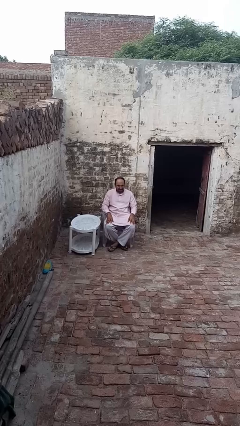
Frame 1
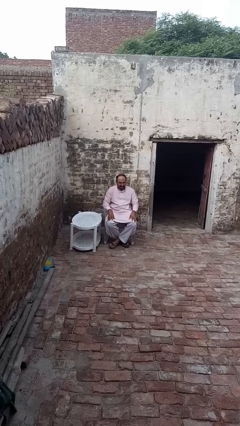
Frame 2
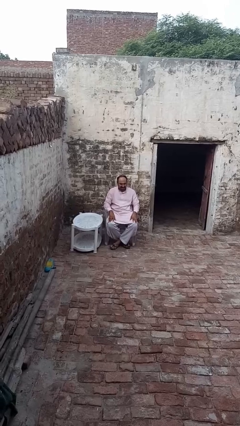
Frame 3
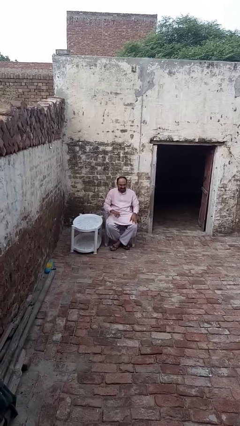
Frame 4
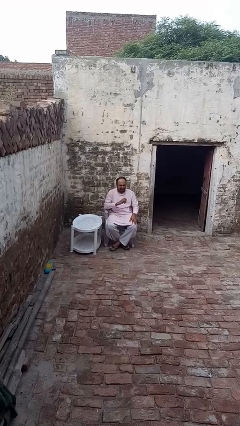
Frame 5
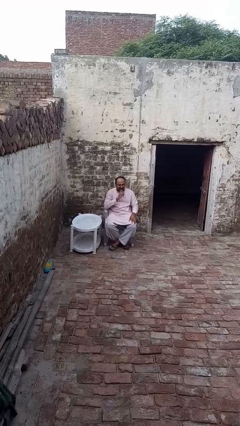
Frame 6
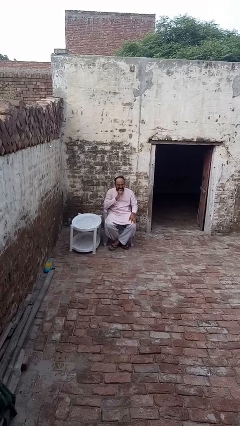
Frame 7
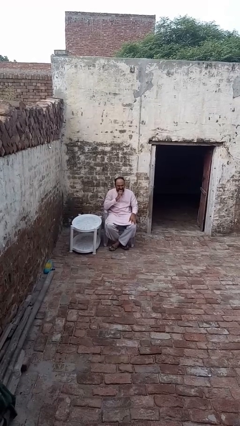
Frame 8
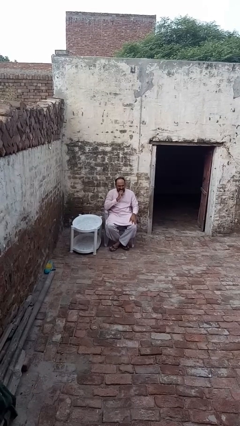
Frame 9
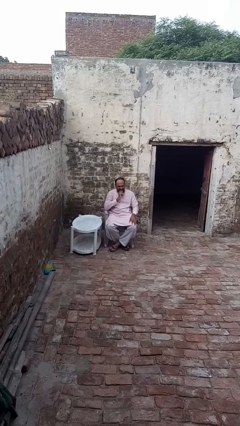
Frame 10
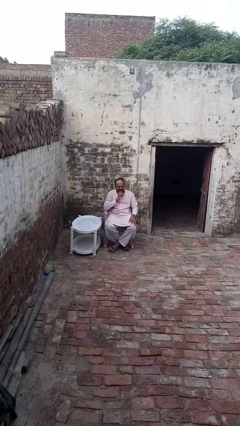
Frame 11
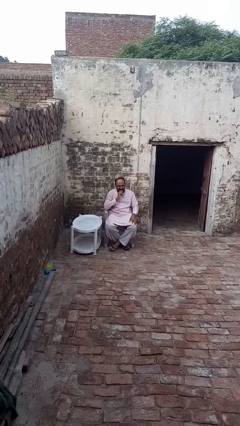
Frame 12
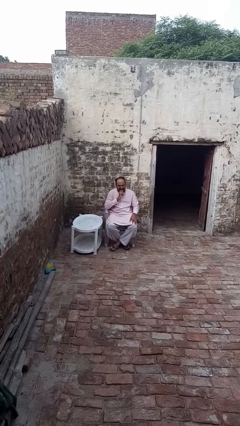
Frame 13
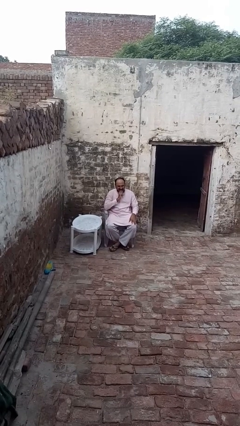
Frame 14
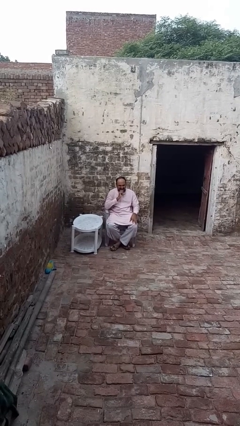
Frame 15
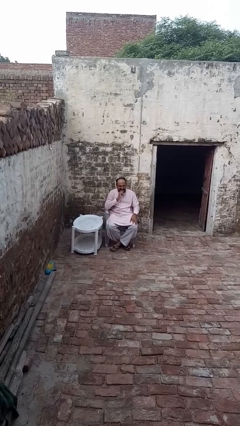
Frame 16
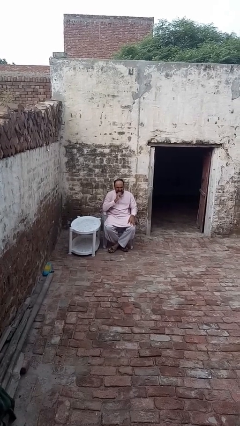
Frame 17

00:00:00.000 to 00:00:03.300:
person strokes chin

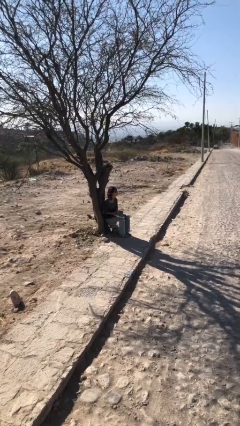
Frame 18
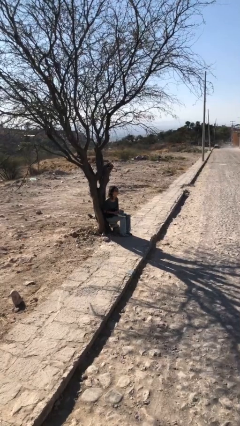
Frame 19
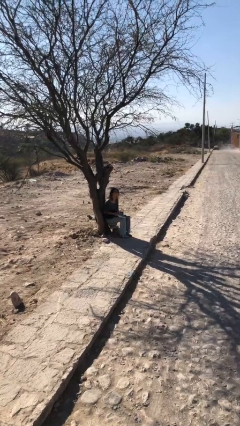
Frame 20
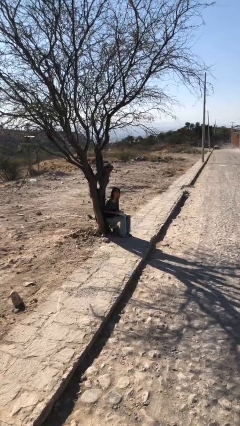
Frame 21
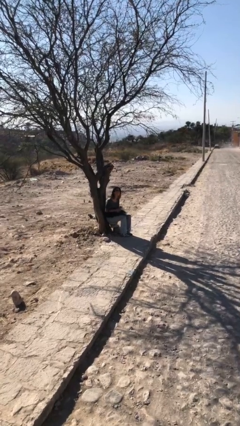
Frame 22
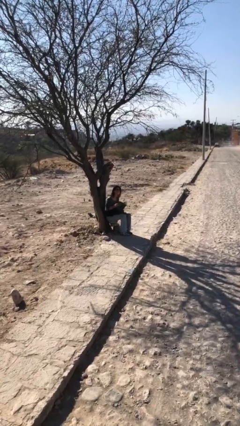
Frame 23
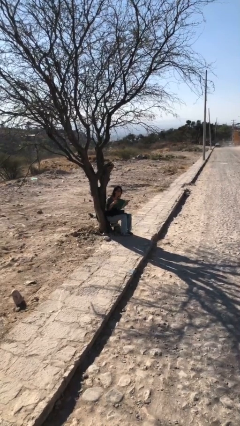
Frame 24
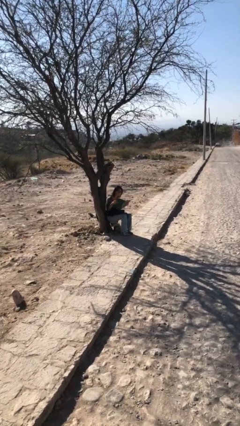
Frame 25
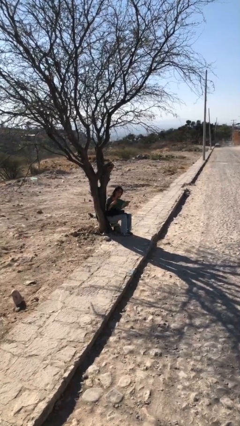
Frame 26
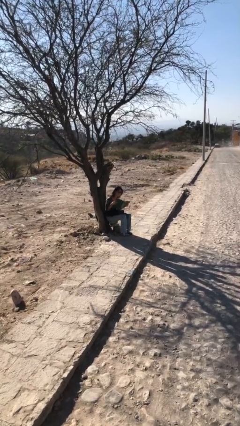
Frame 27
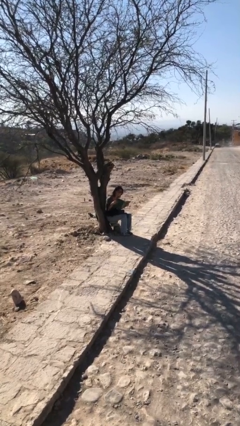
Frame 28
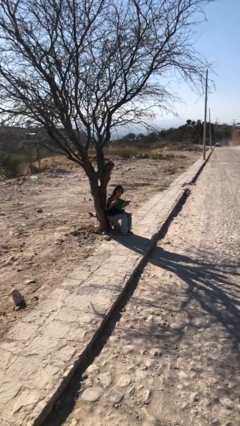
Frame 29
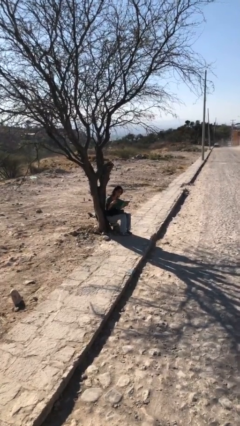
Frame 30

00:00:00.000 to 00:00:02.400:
person reads document

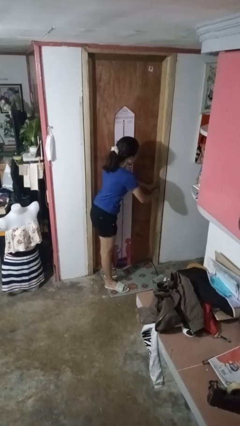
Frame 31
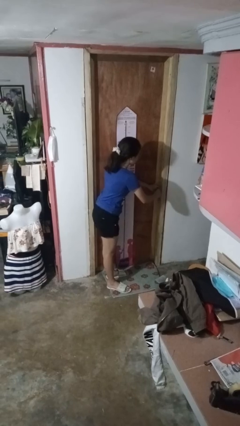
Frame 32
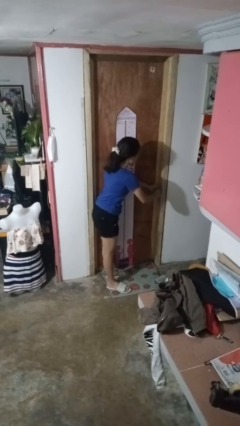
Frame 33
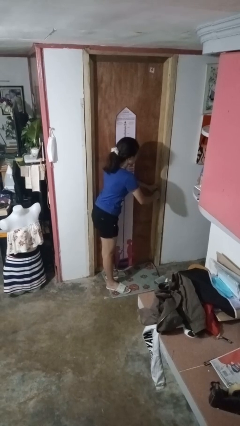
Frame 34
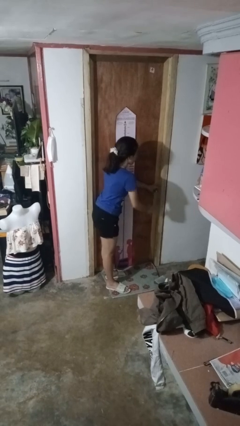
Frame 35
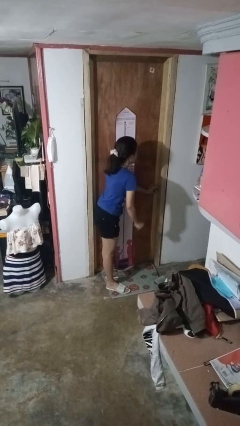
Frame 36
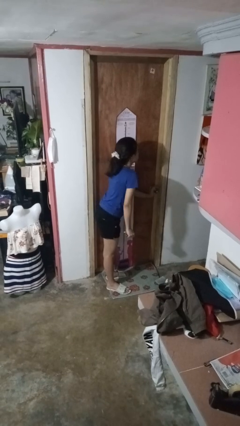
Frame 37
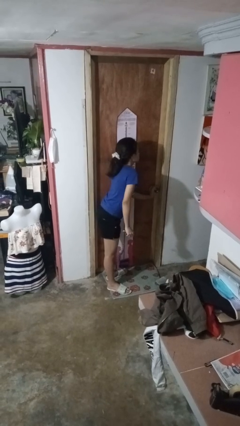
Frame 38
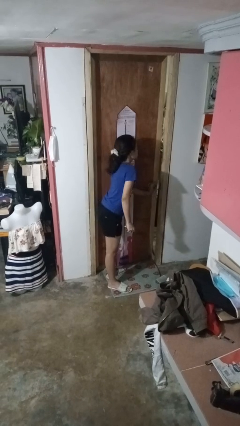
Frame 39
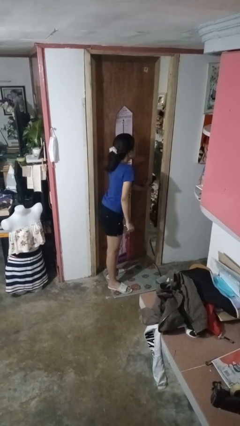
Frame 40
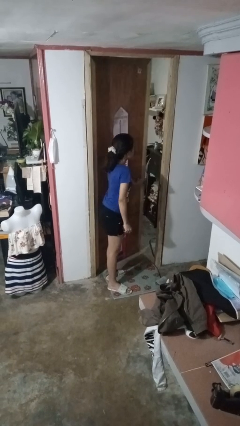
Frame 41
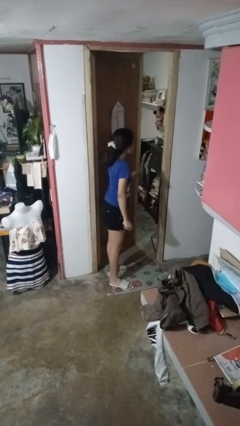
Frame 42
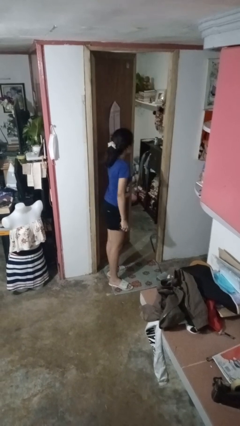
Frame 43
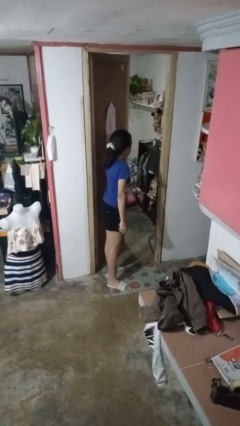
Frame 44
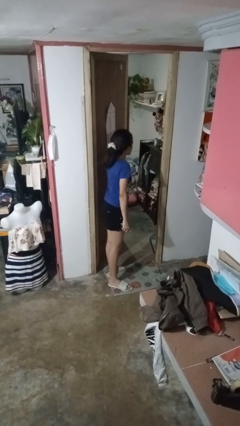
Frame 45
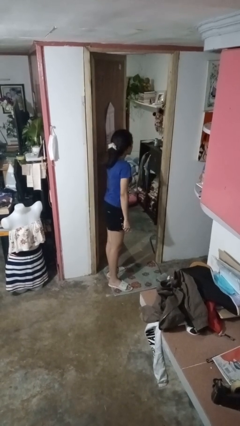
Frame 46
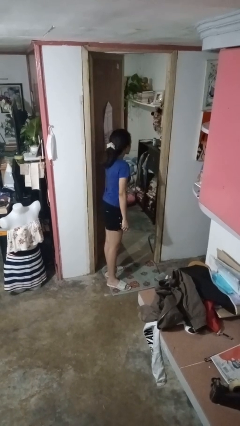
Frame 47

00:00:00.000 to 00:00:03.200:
person opens facility door

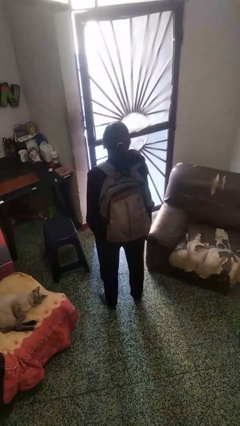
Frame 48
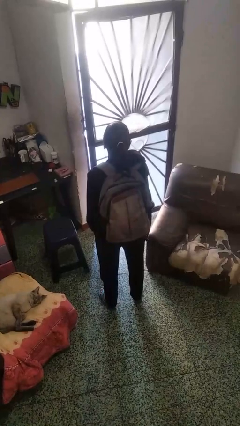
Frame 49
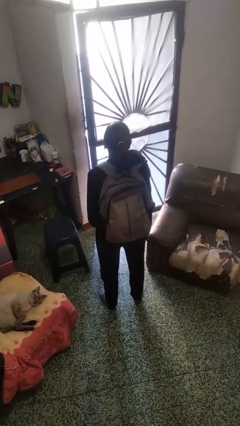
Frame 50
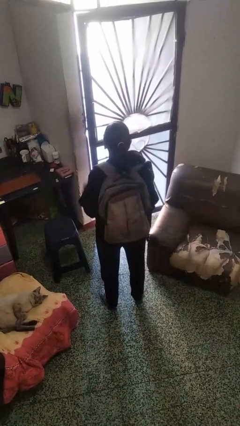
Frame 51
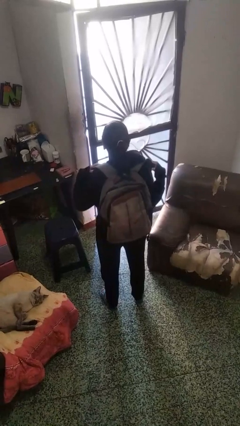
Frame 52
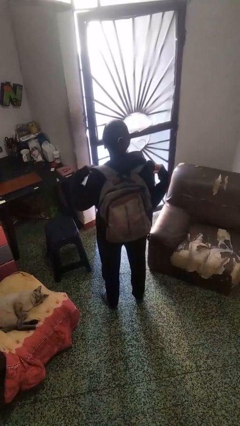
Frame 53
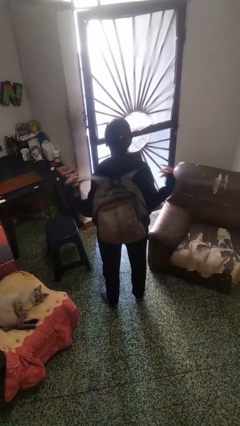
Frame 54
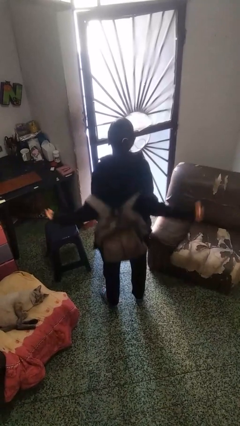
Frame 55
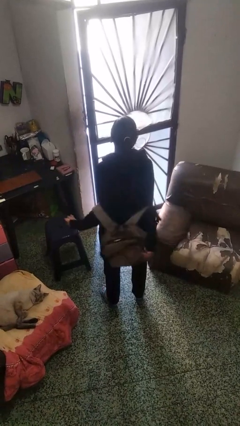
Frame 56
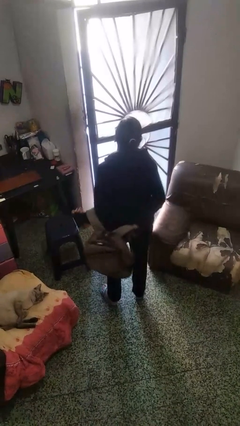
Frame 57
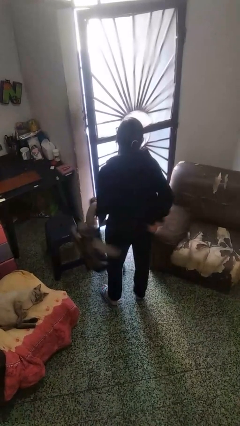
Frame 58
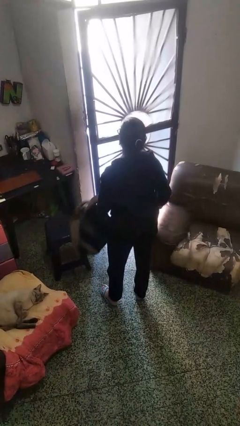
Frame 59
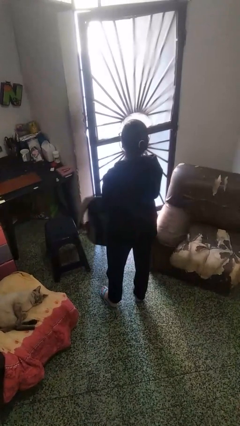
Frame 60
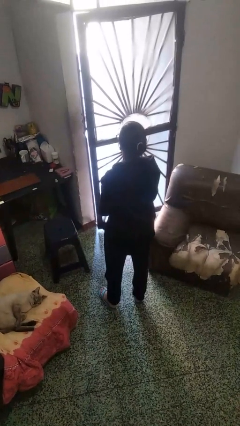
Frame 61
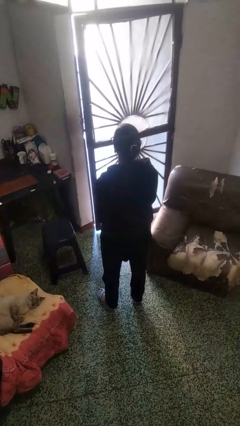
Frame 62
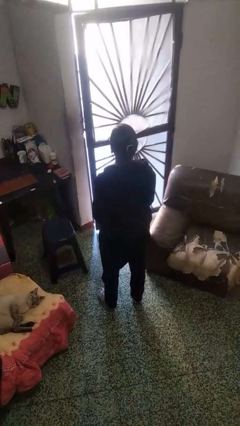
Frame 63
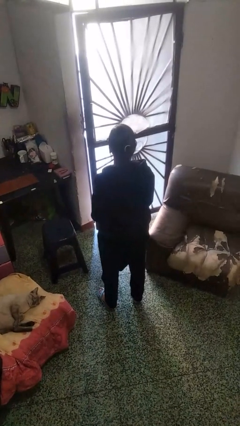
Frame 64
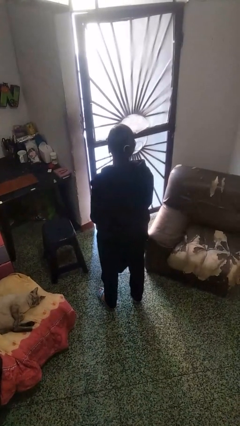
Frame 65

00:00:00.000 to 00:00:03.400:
person takes off backpack

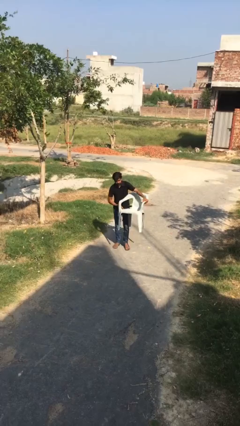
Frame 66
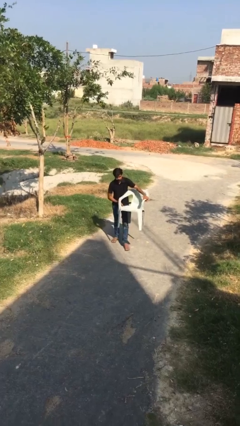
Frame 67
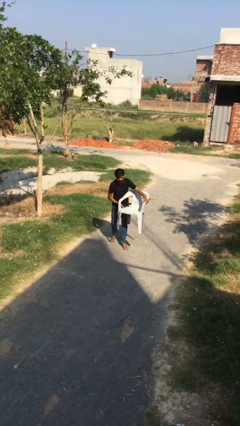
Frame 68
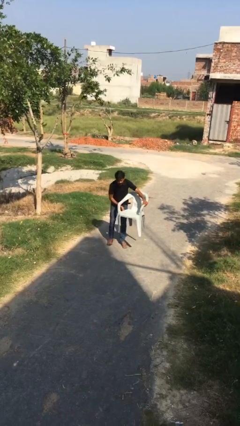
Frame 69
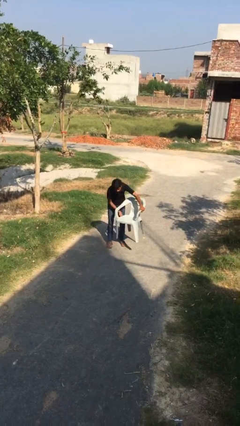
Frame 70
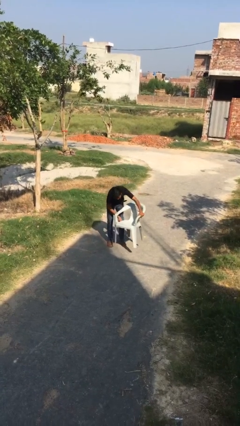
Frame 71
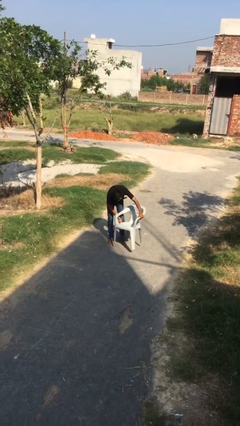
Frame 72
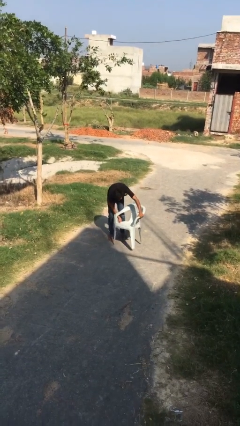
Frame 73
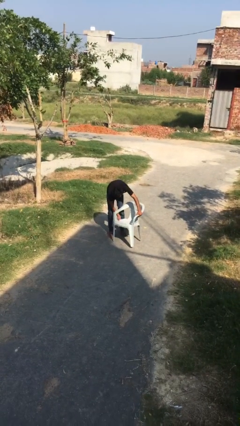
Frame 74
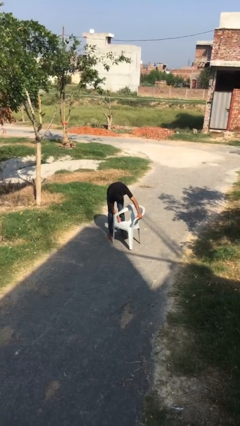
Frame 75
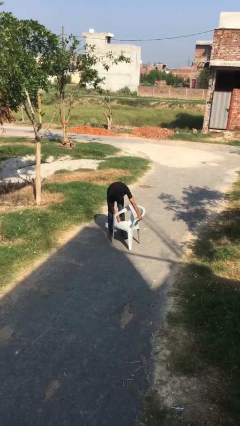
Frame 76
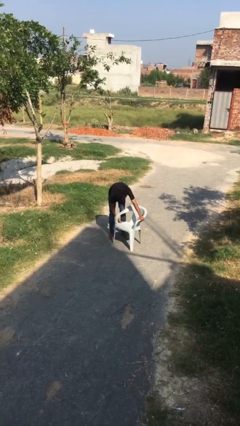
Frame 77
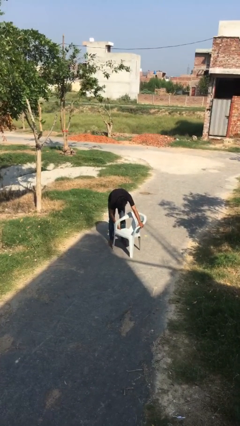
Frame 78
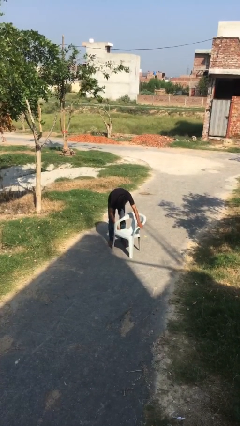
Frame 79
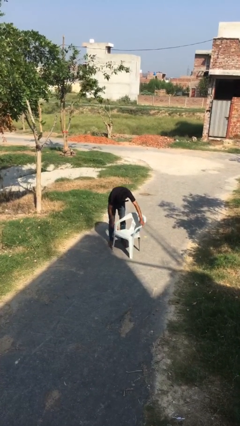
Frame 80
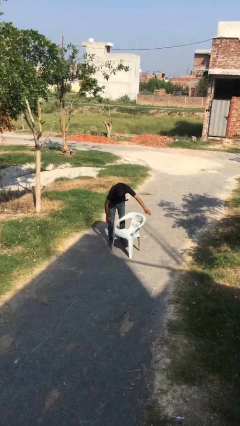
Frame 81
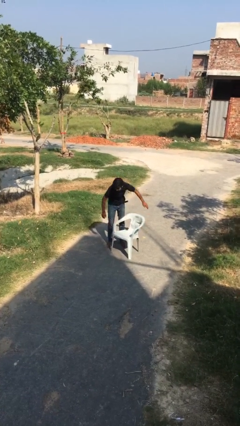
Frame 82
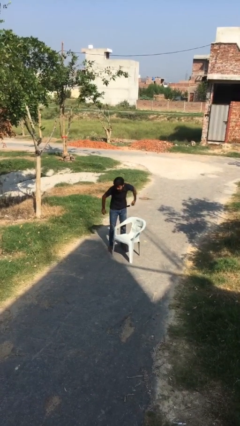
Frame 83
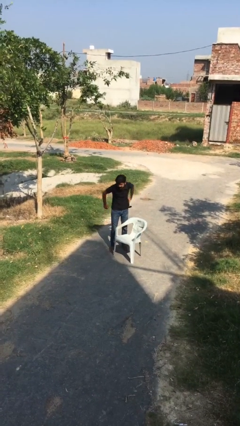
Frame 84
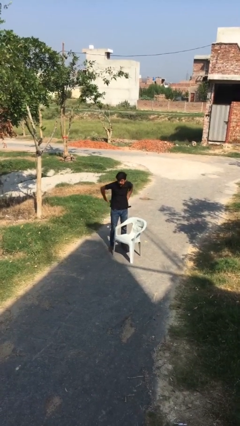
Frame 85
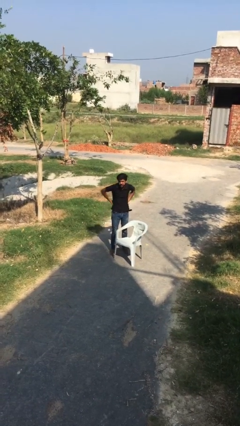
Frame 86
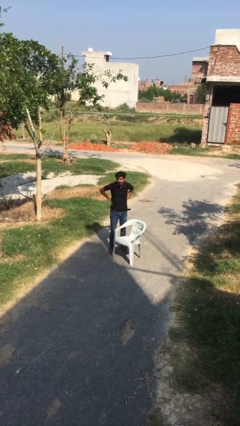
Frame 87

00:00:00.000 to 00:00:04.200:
person puts down object on floor

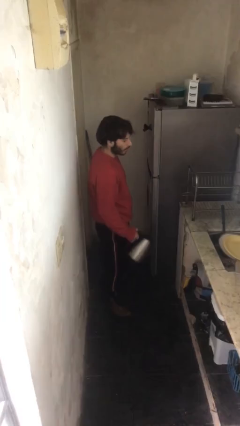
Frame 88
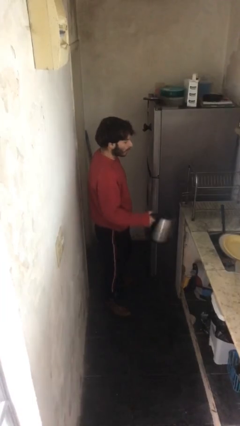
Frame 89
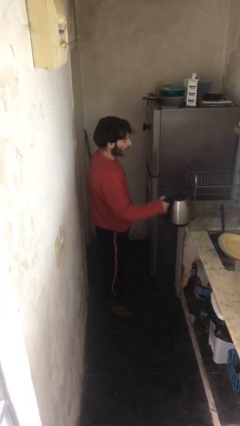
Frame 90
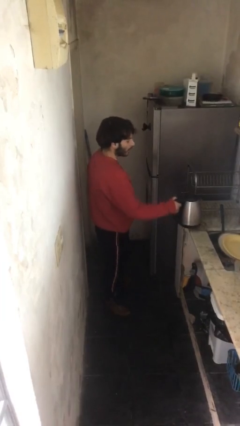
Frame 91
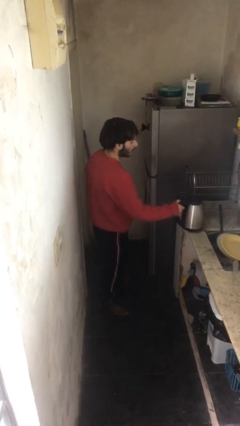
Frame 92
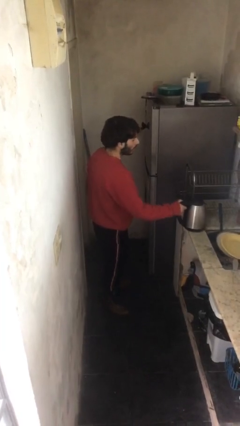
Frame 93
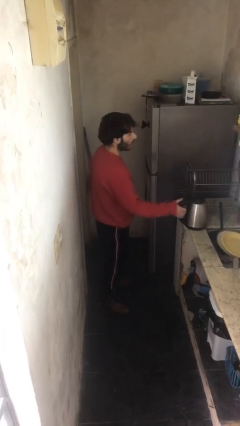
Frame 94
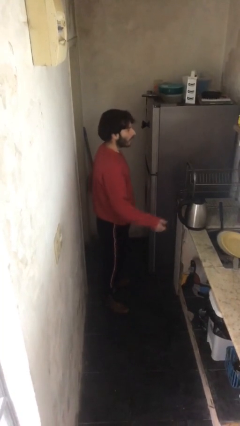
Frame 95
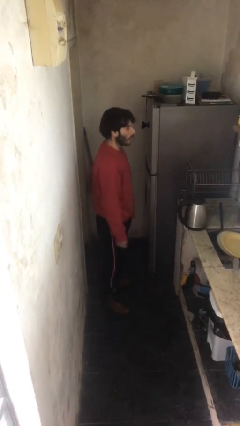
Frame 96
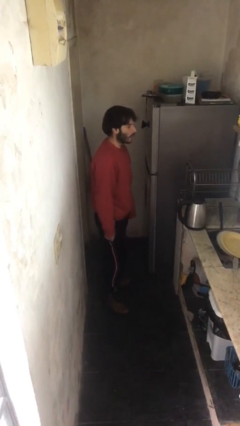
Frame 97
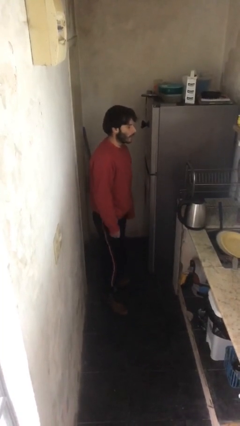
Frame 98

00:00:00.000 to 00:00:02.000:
person puts down object on countertop
